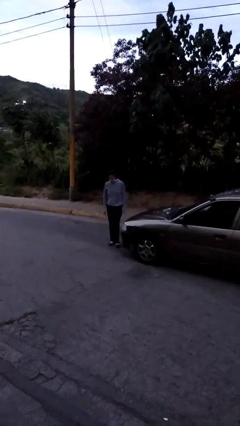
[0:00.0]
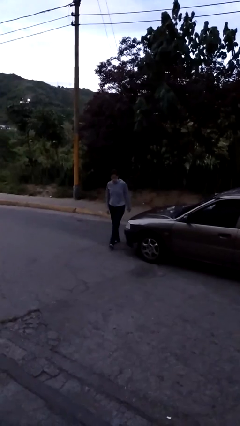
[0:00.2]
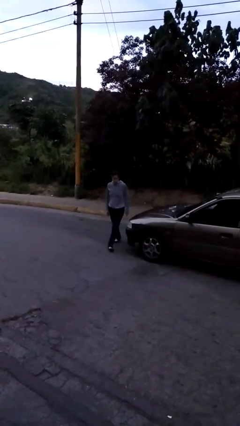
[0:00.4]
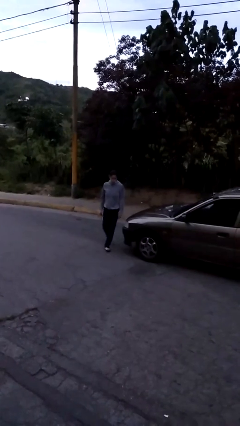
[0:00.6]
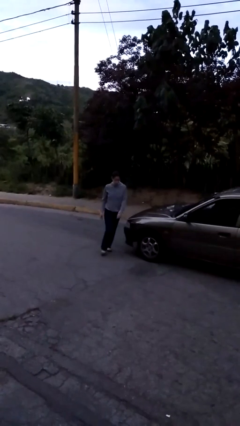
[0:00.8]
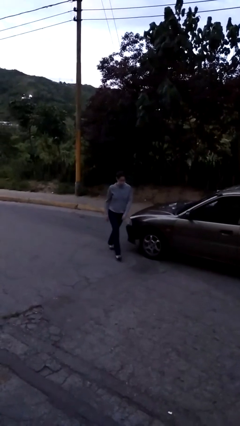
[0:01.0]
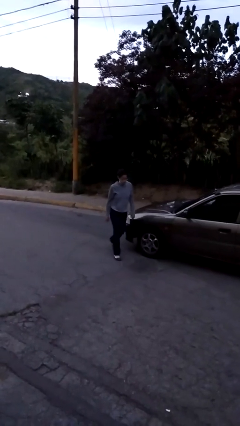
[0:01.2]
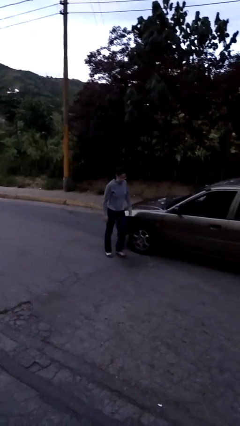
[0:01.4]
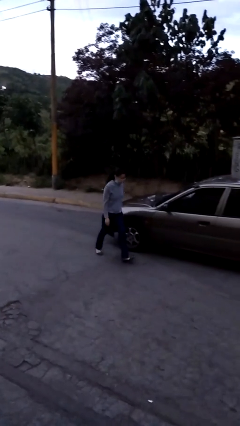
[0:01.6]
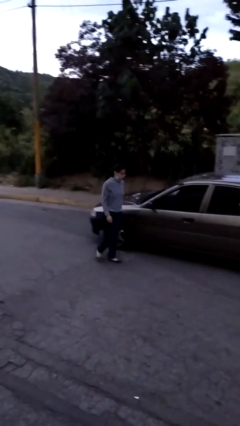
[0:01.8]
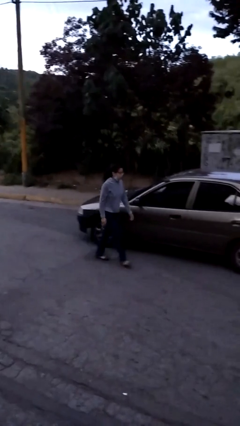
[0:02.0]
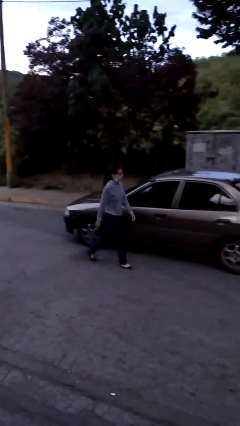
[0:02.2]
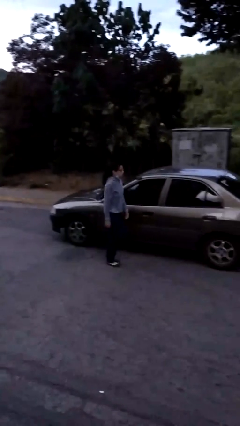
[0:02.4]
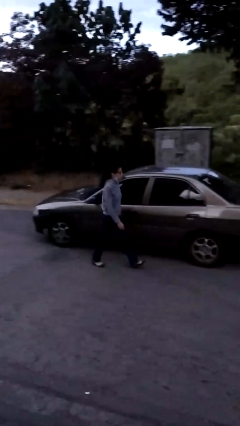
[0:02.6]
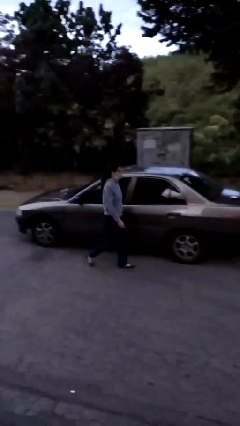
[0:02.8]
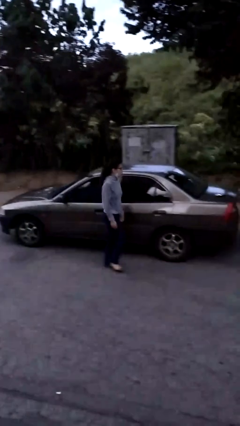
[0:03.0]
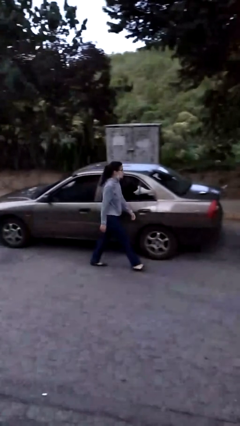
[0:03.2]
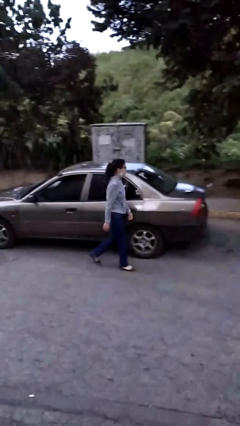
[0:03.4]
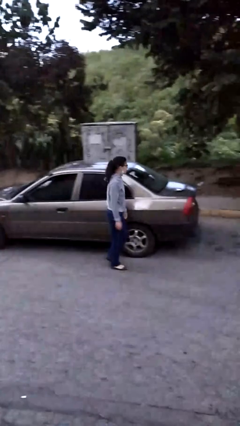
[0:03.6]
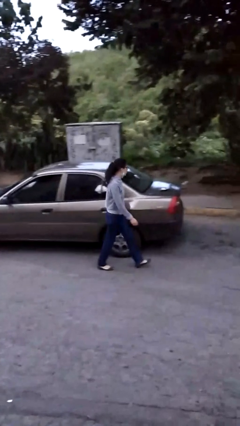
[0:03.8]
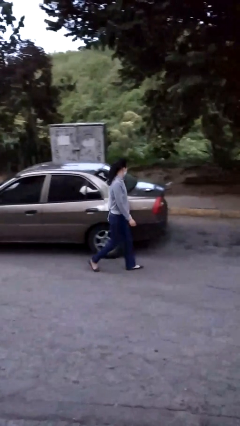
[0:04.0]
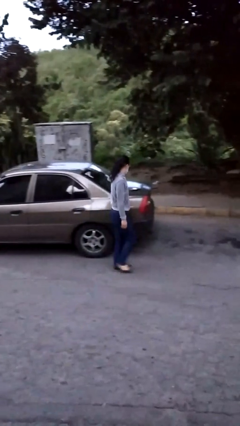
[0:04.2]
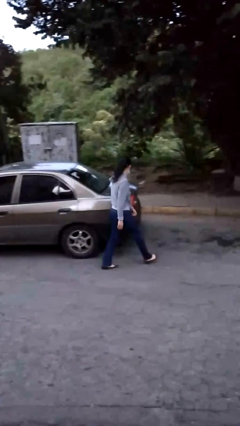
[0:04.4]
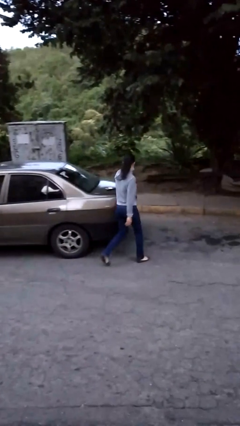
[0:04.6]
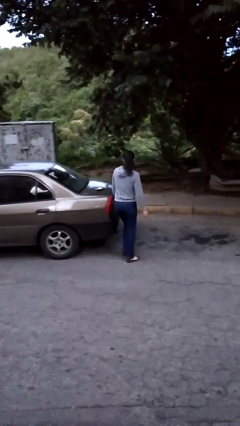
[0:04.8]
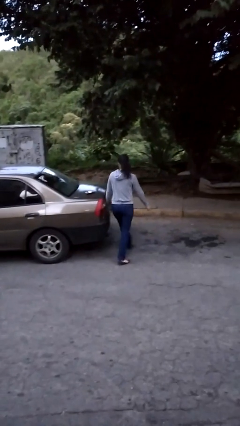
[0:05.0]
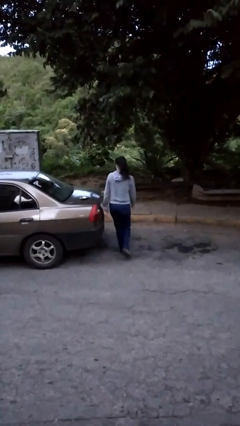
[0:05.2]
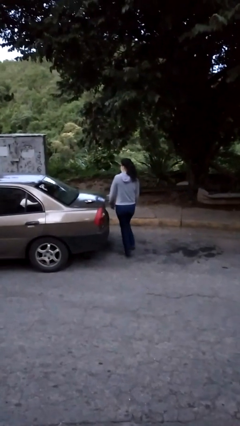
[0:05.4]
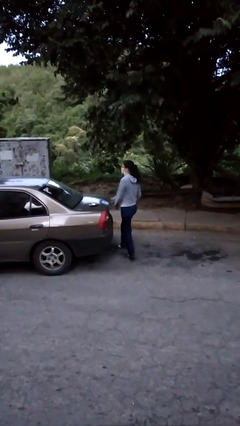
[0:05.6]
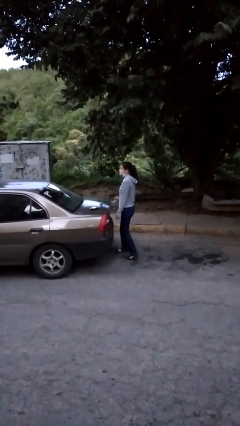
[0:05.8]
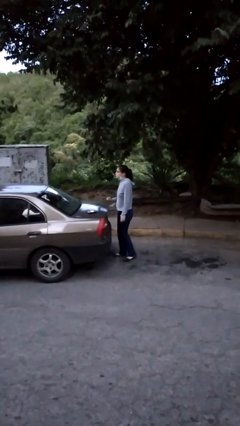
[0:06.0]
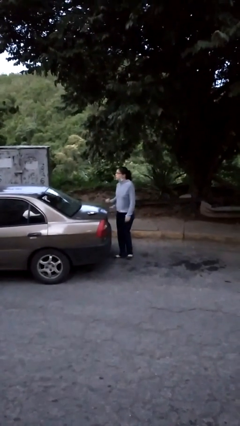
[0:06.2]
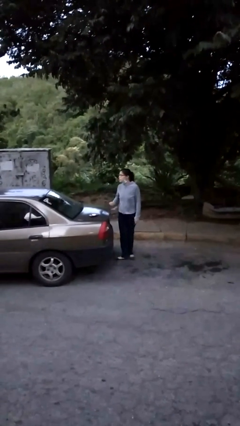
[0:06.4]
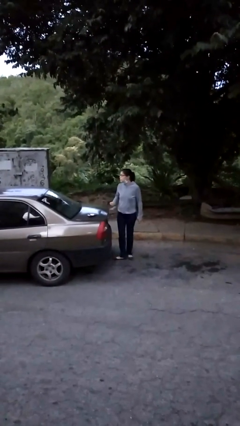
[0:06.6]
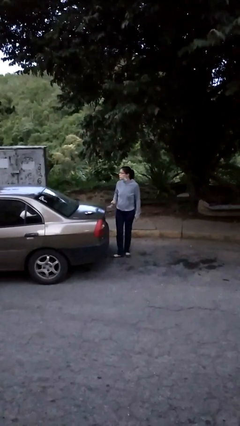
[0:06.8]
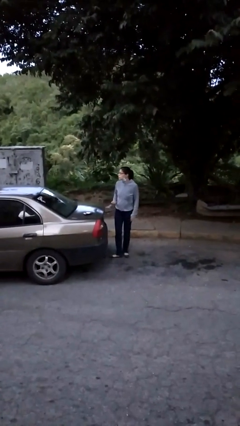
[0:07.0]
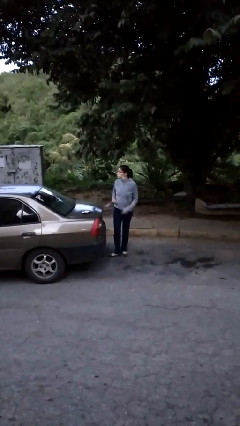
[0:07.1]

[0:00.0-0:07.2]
person walks around car

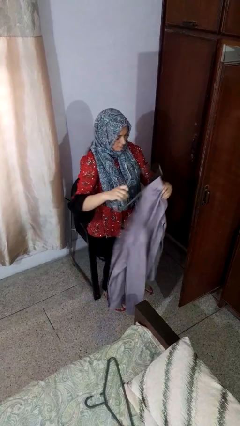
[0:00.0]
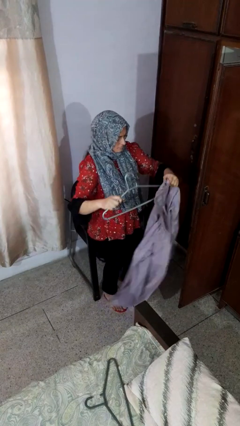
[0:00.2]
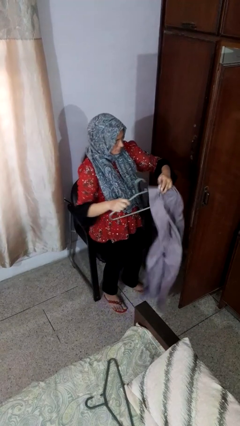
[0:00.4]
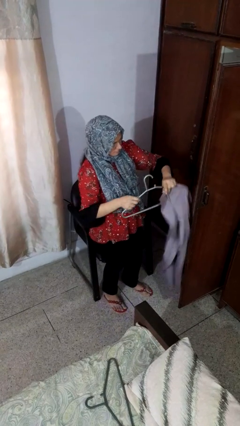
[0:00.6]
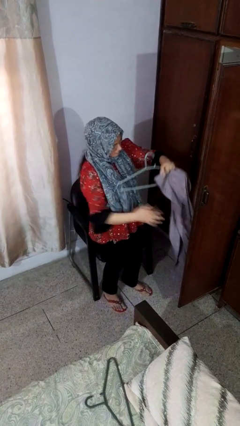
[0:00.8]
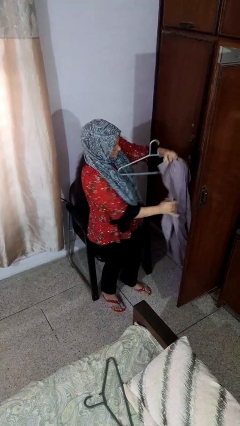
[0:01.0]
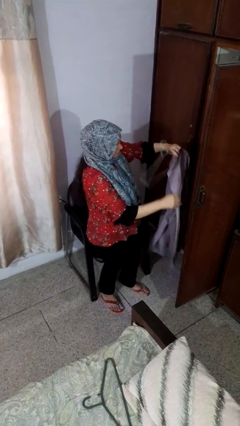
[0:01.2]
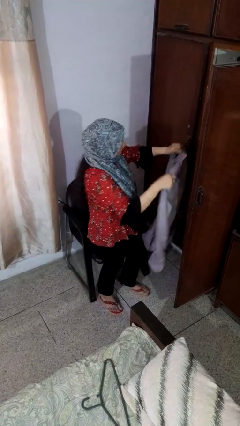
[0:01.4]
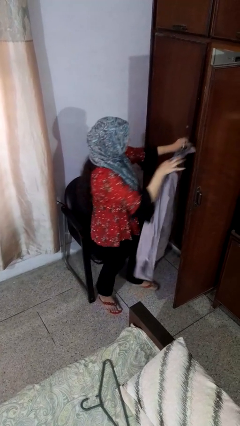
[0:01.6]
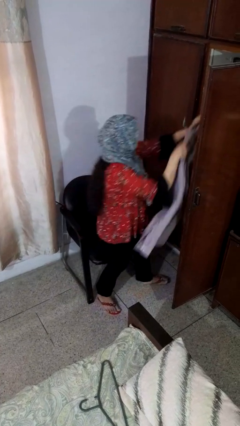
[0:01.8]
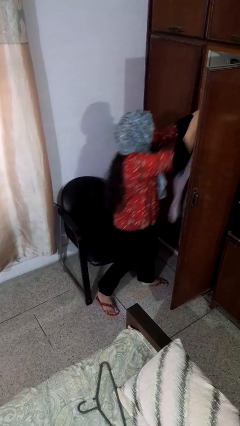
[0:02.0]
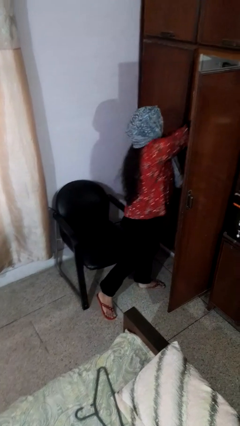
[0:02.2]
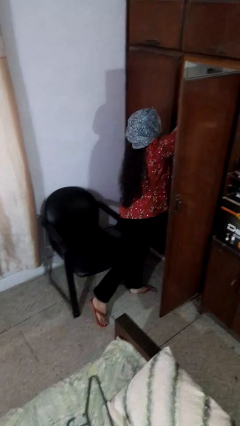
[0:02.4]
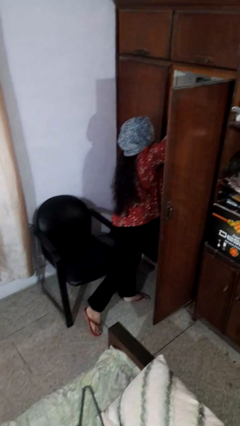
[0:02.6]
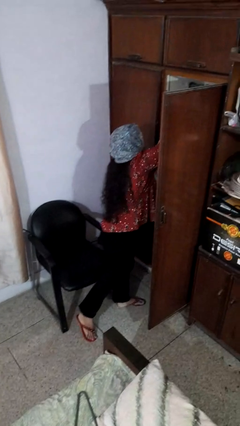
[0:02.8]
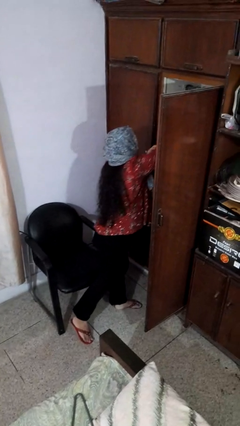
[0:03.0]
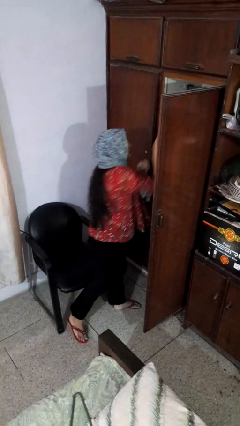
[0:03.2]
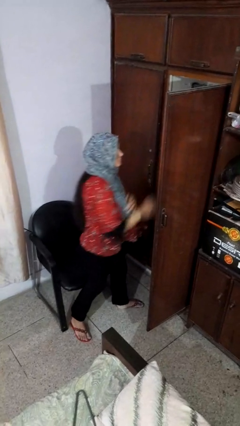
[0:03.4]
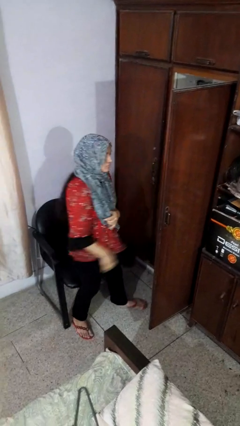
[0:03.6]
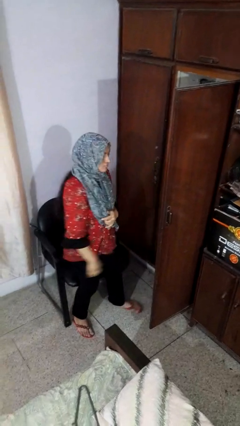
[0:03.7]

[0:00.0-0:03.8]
person puts clothes into closet

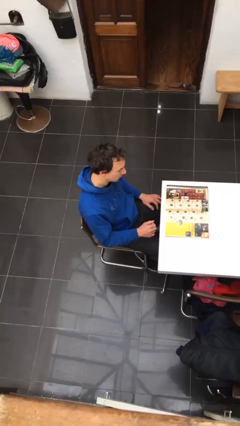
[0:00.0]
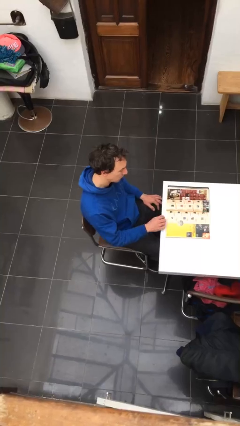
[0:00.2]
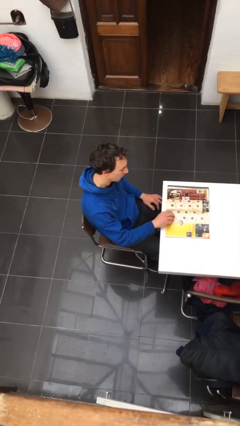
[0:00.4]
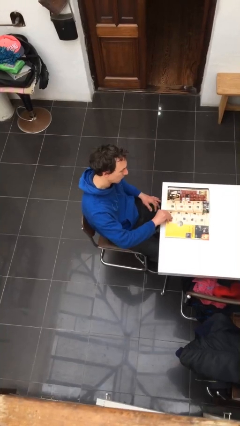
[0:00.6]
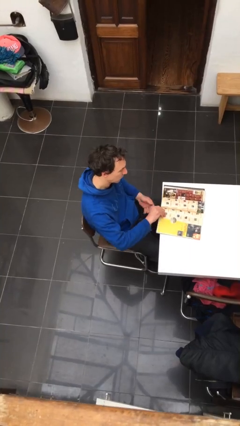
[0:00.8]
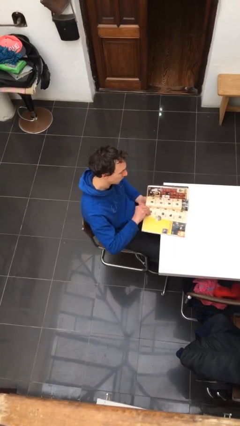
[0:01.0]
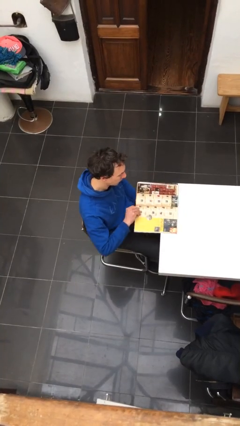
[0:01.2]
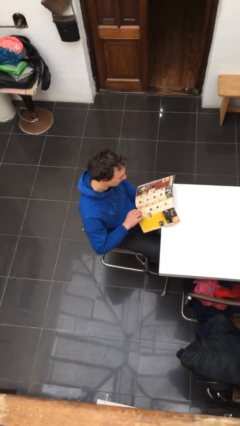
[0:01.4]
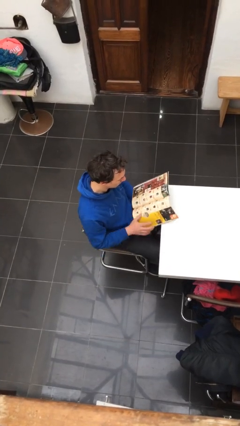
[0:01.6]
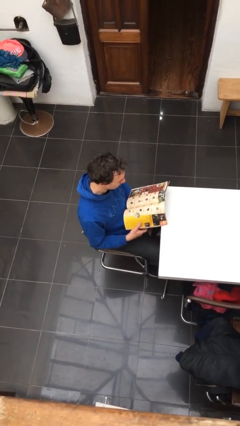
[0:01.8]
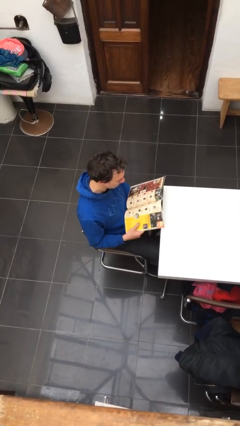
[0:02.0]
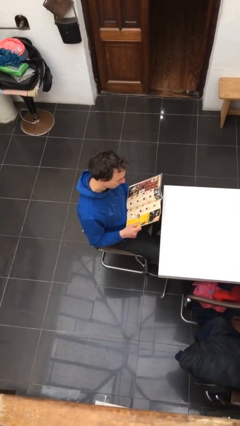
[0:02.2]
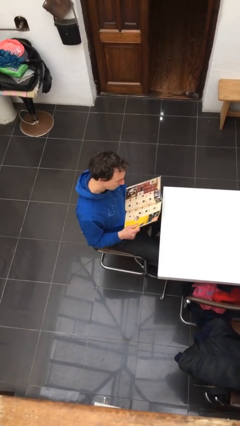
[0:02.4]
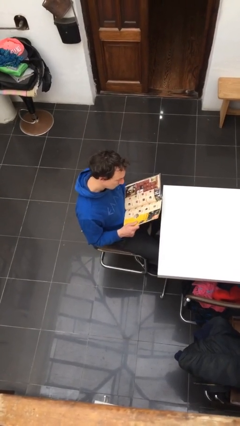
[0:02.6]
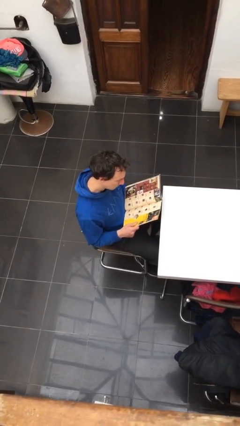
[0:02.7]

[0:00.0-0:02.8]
person picks up object from table

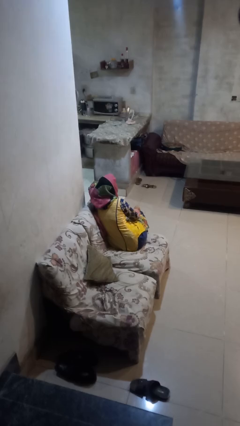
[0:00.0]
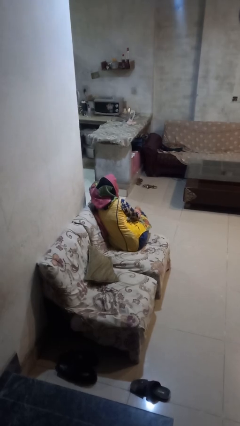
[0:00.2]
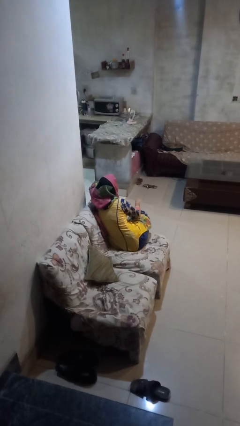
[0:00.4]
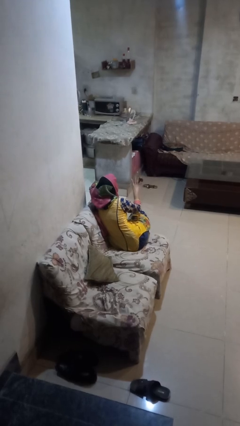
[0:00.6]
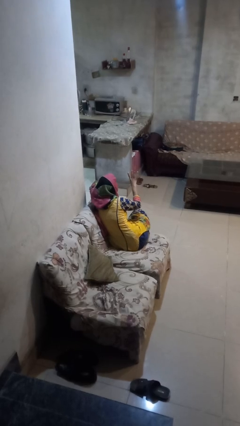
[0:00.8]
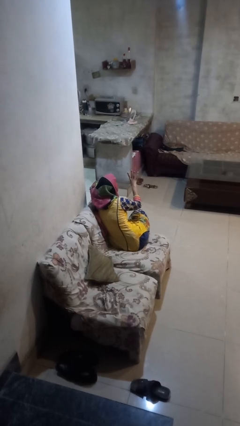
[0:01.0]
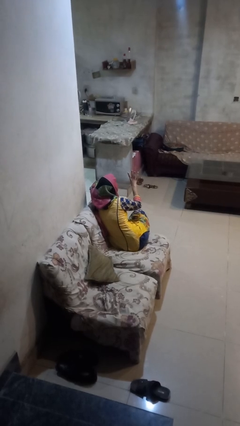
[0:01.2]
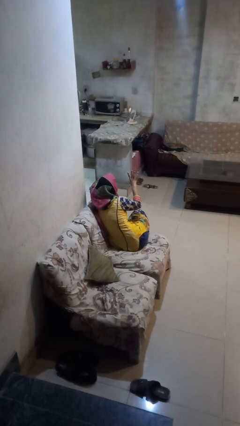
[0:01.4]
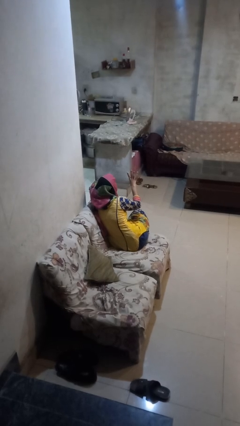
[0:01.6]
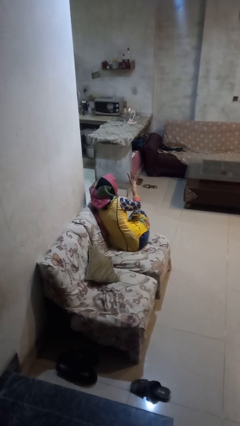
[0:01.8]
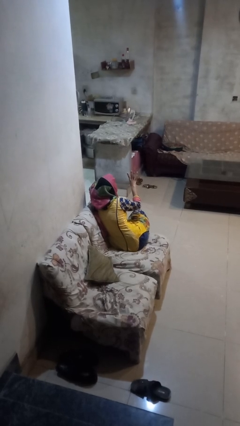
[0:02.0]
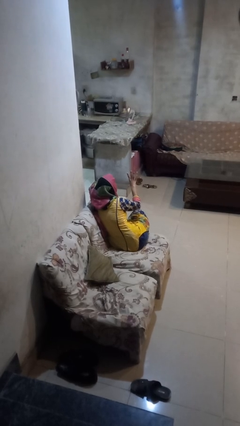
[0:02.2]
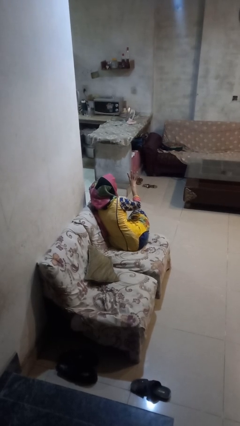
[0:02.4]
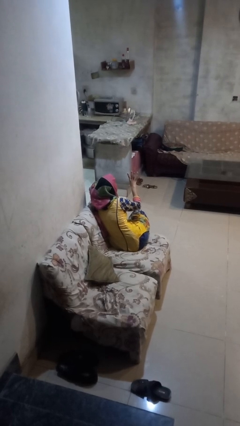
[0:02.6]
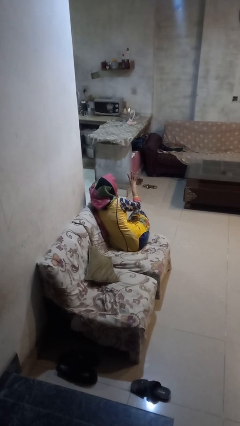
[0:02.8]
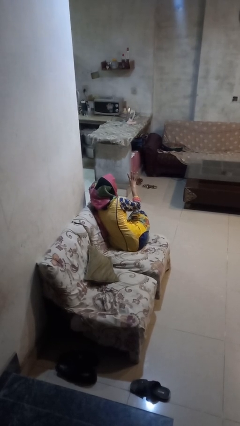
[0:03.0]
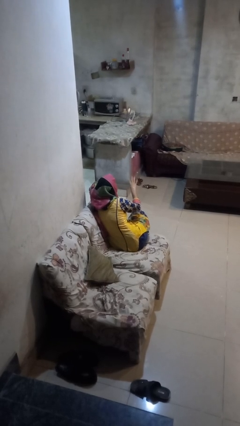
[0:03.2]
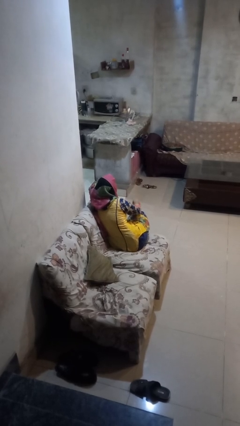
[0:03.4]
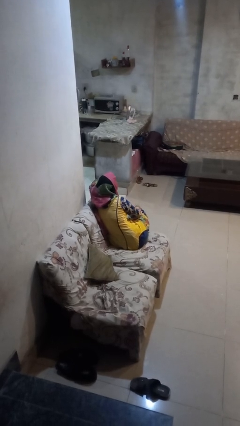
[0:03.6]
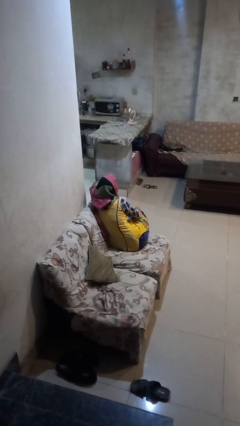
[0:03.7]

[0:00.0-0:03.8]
person gestures number four

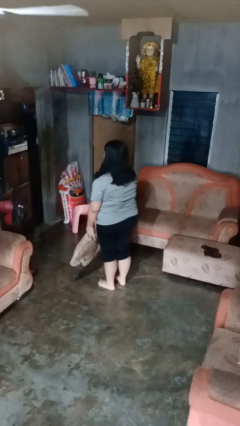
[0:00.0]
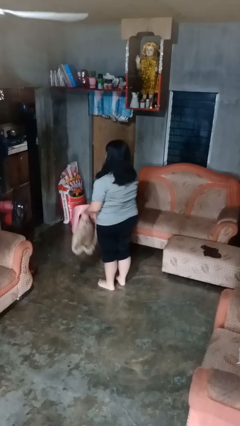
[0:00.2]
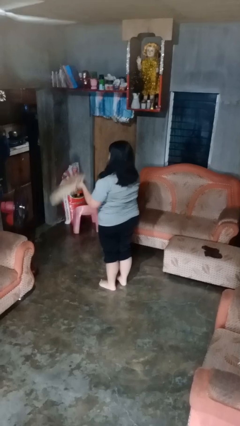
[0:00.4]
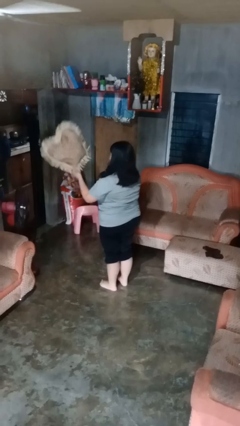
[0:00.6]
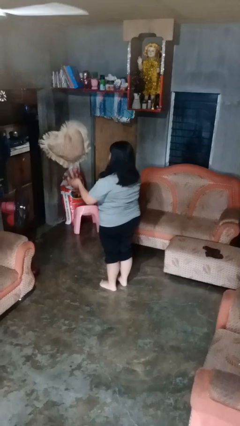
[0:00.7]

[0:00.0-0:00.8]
person throws object into air
